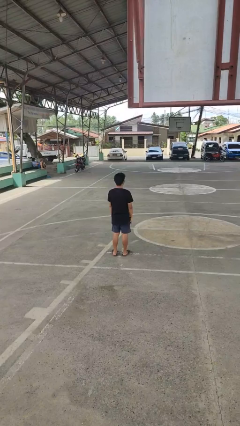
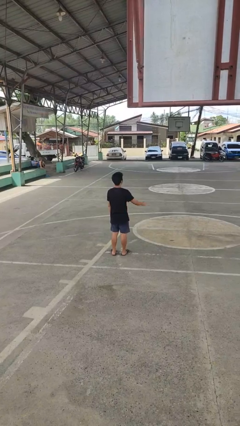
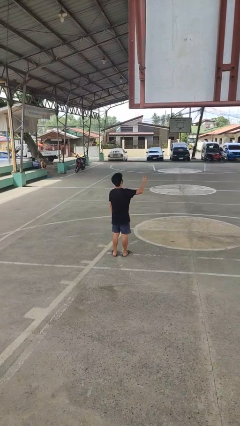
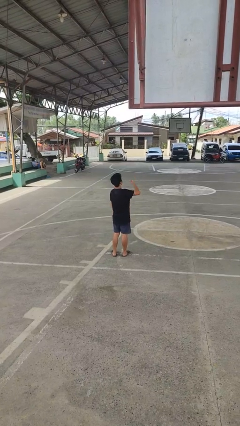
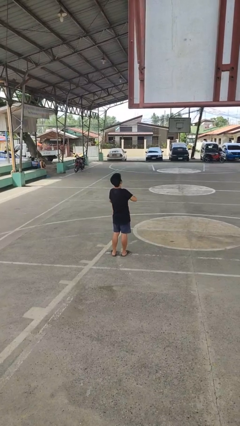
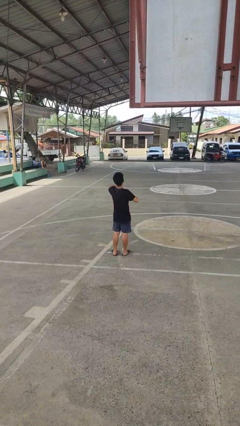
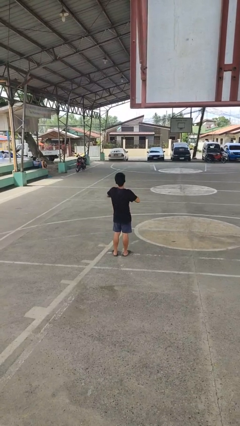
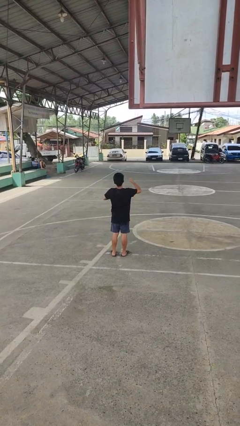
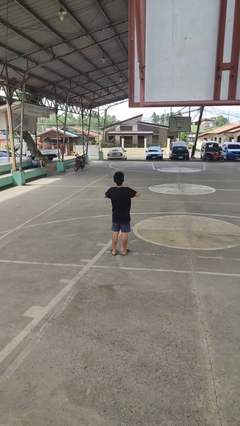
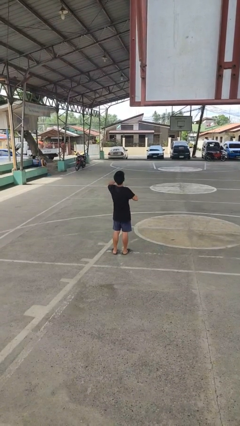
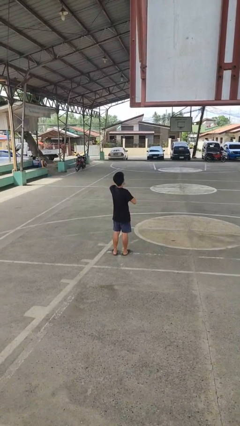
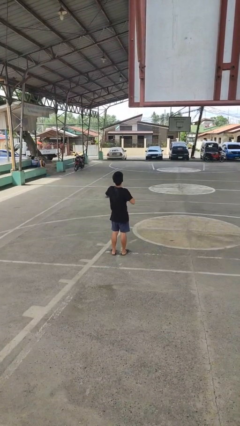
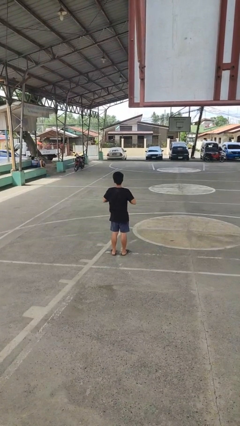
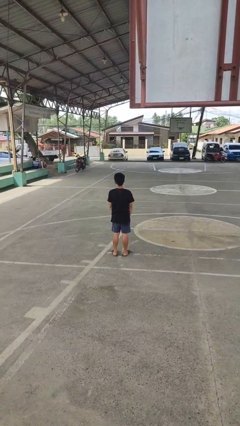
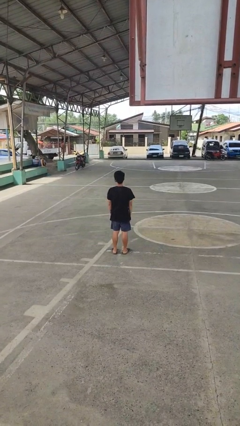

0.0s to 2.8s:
person drums on chest

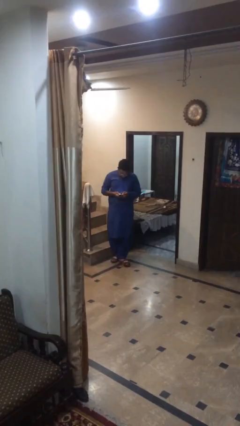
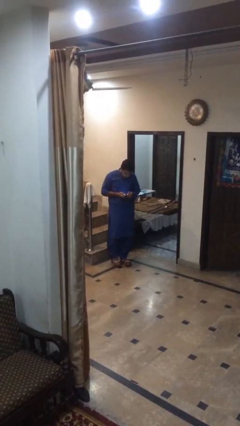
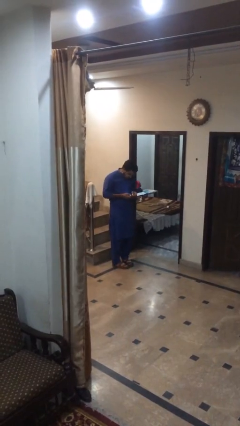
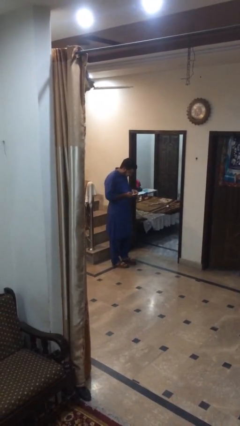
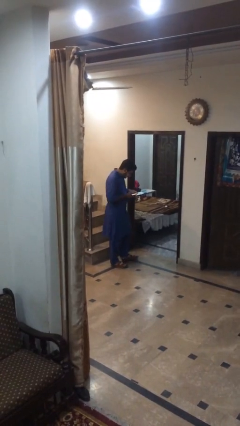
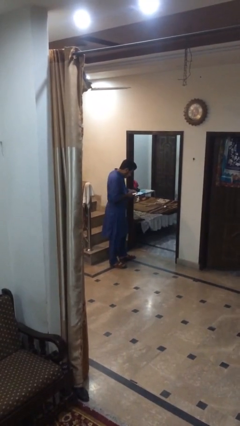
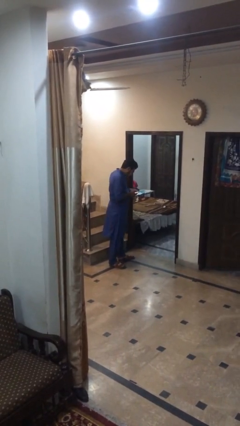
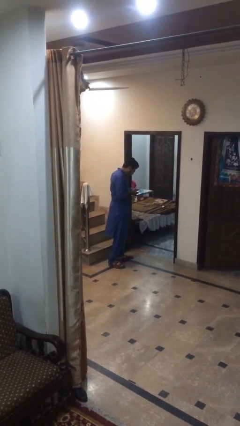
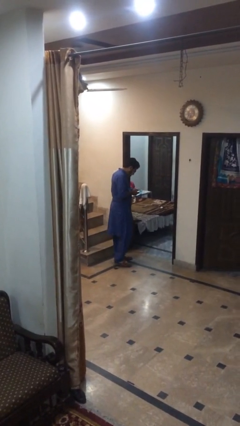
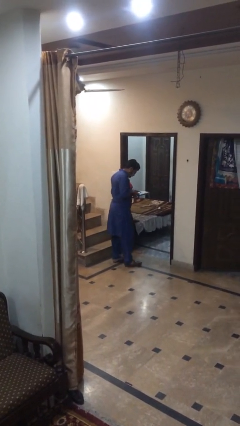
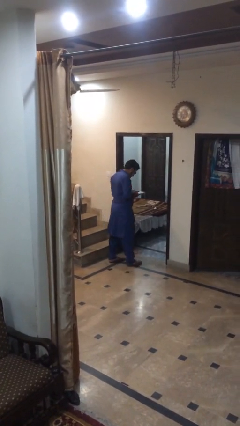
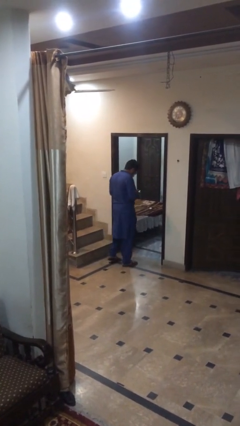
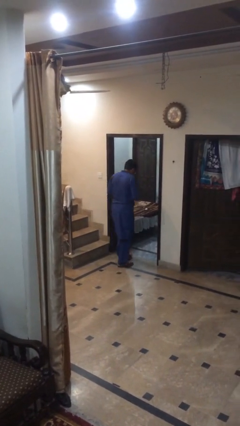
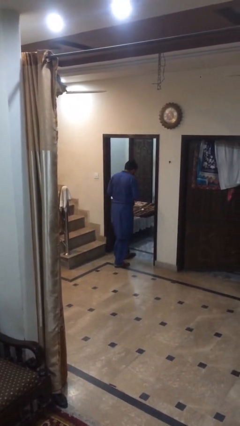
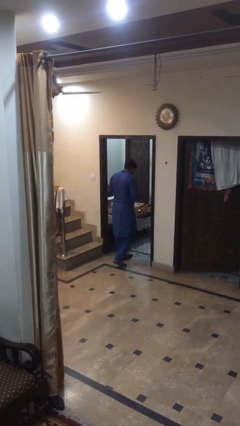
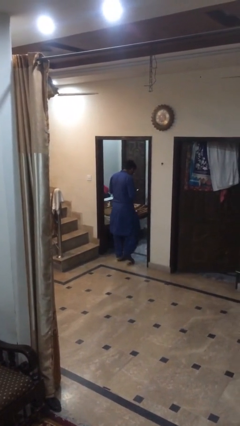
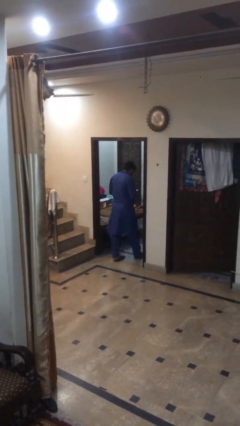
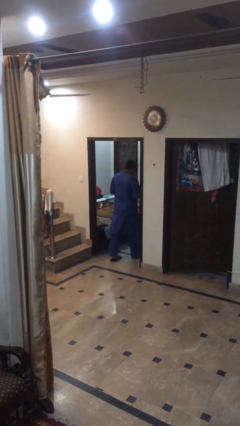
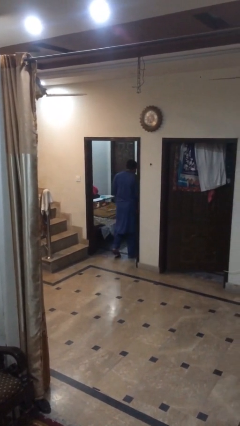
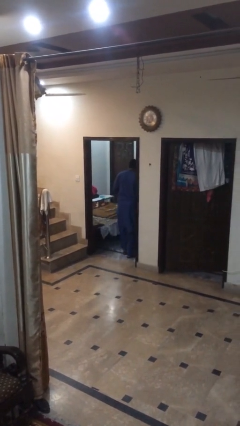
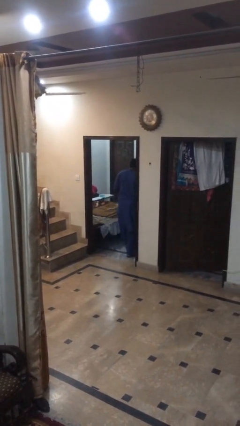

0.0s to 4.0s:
person enters scene through structure

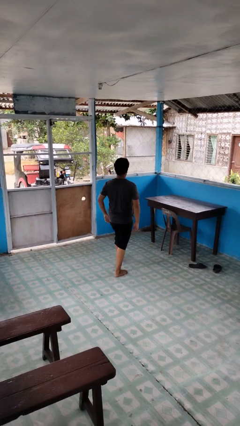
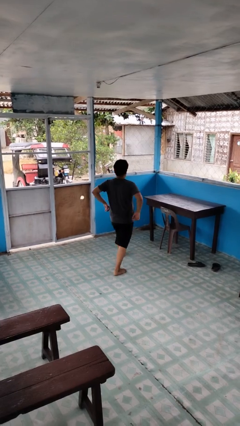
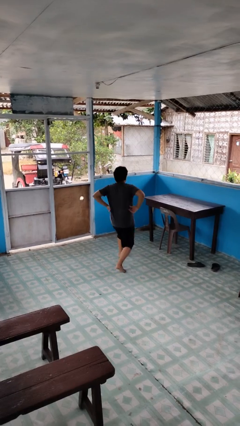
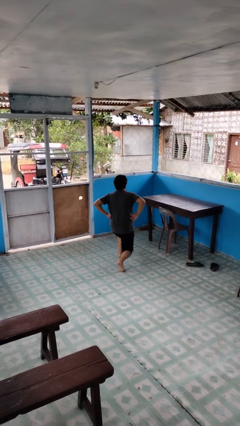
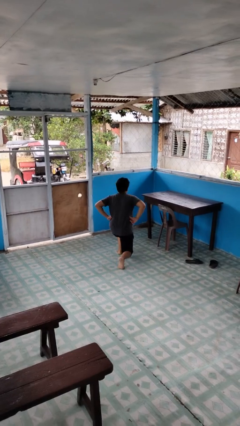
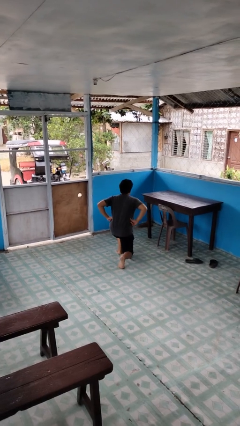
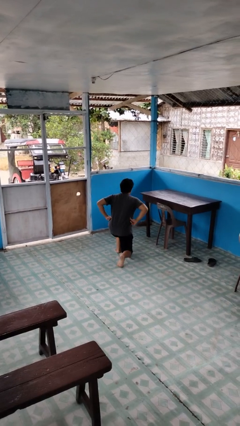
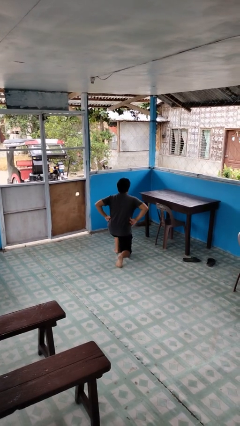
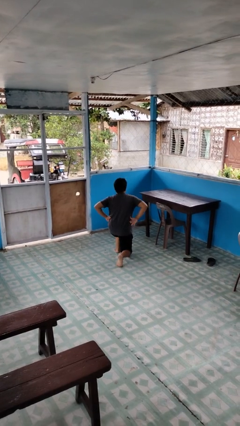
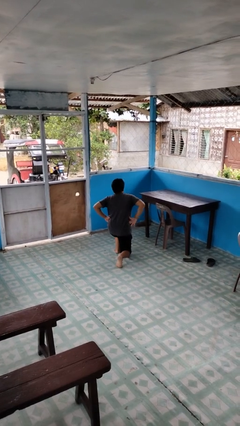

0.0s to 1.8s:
person exercises with lunges

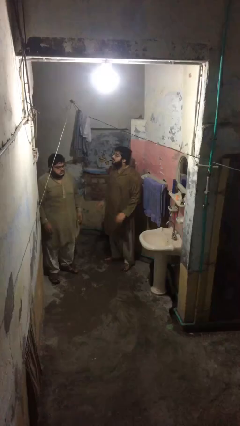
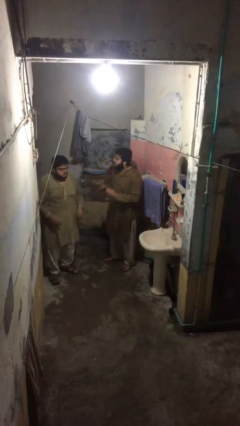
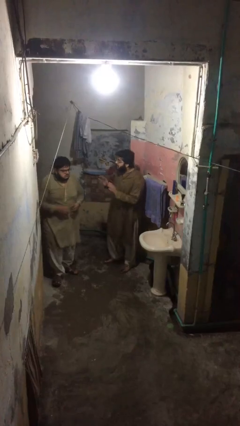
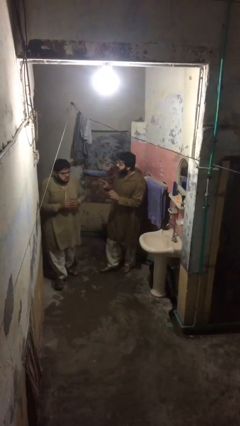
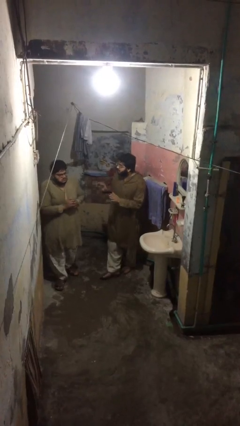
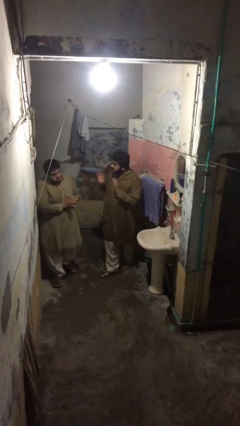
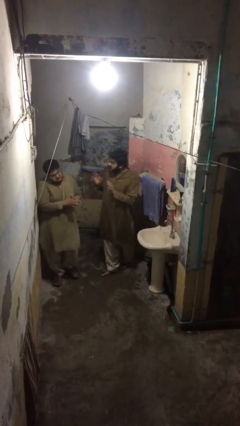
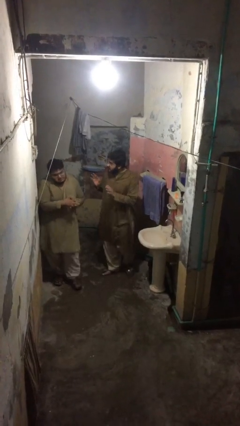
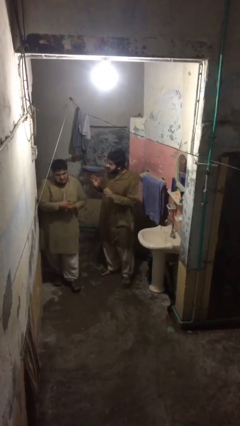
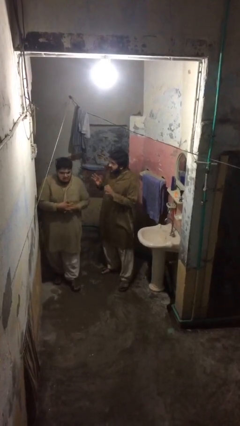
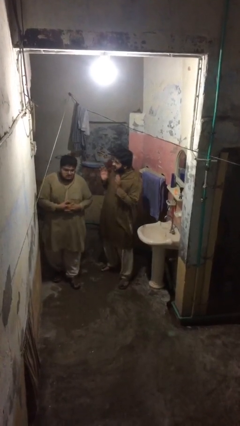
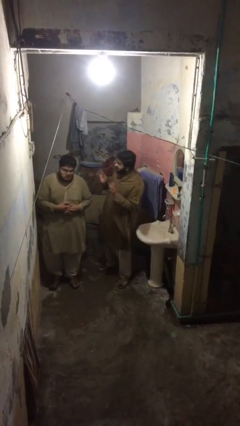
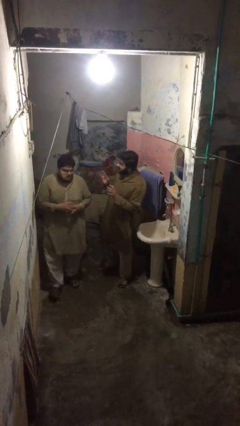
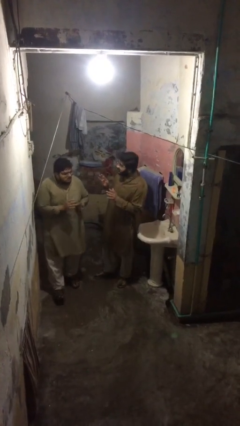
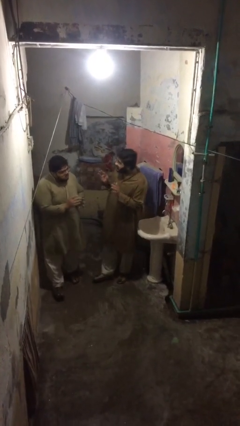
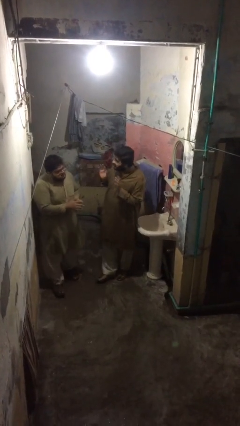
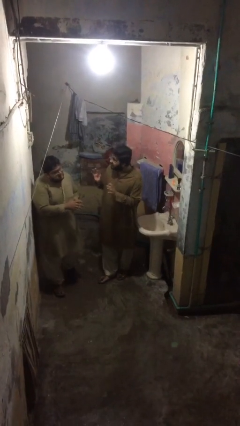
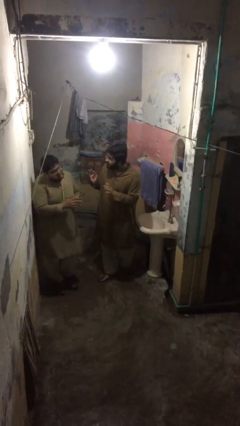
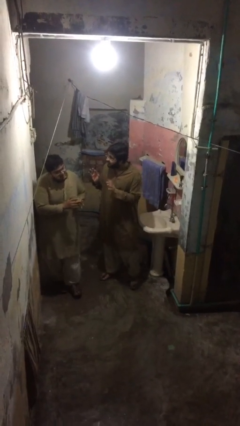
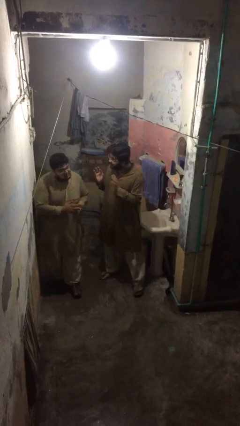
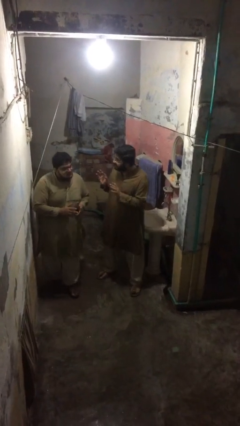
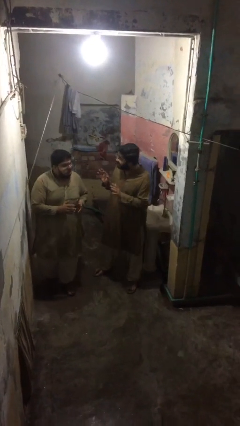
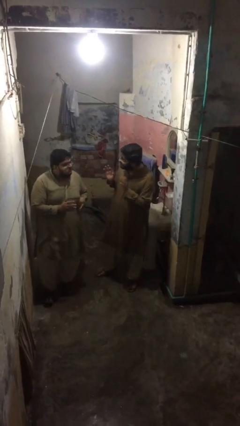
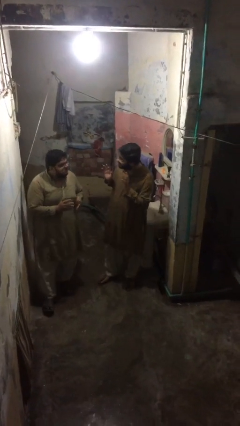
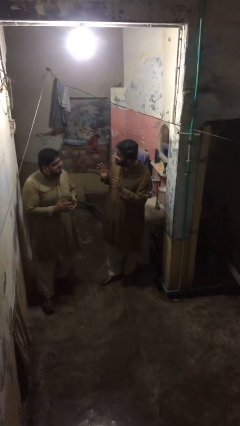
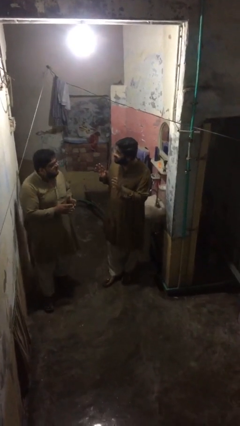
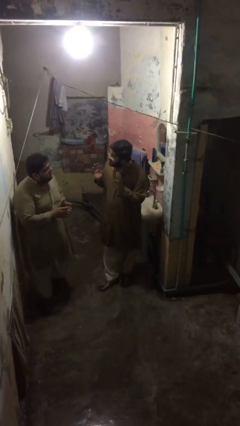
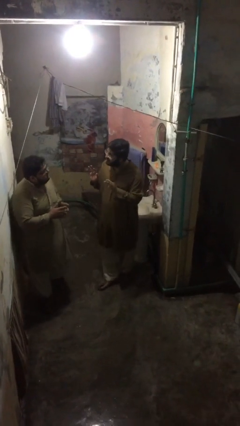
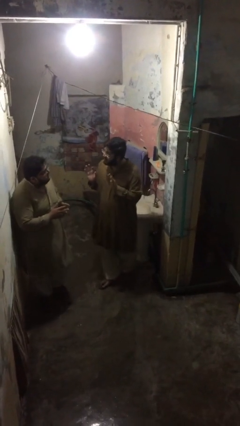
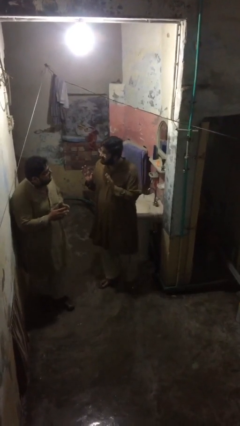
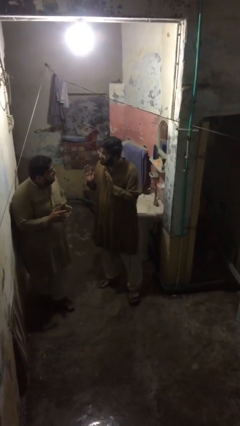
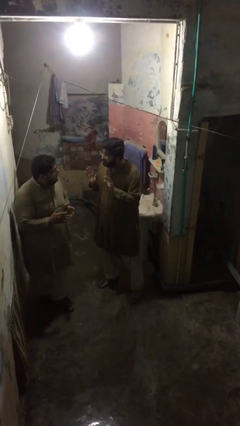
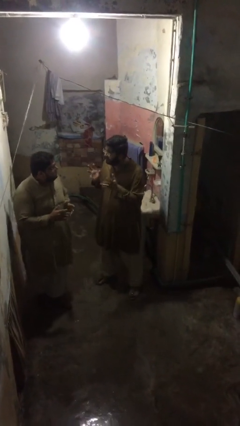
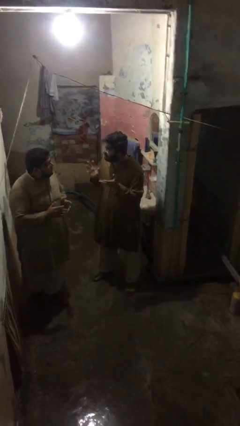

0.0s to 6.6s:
person talks to person

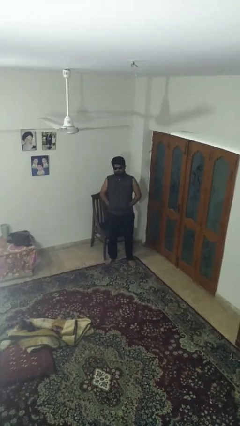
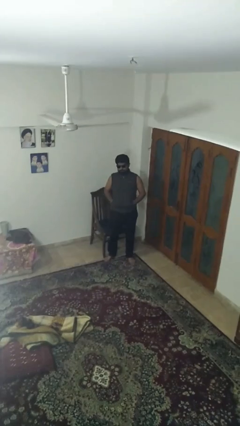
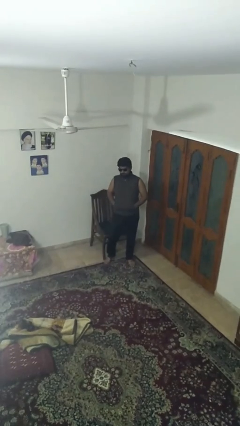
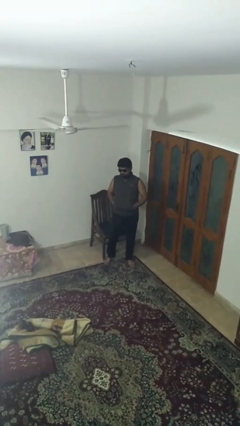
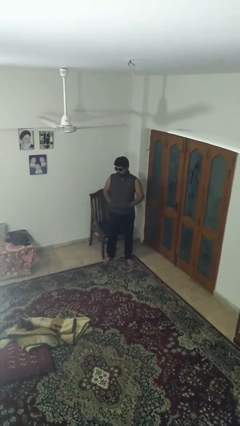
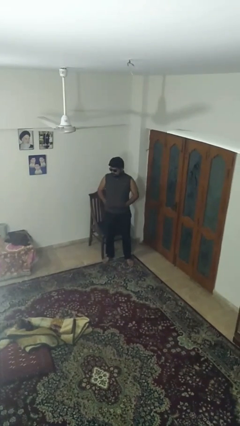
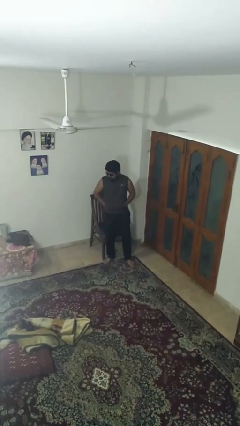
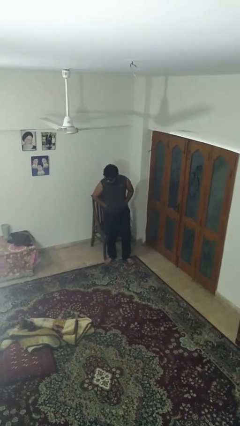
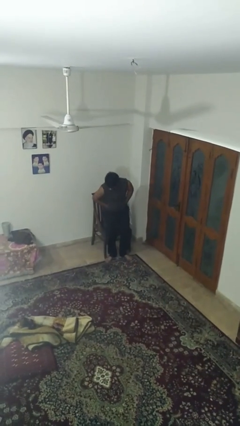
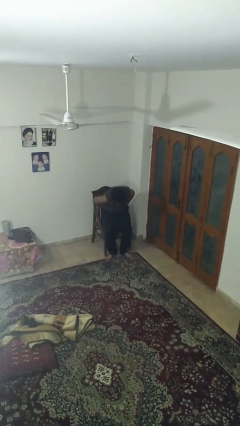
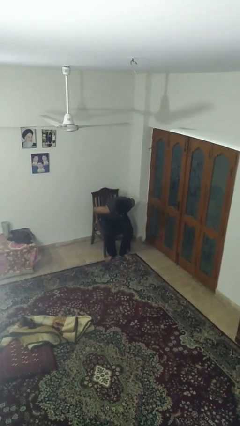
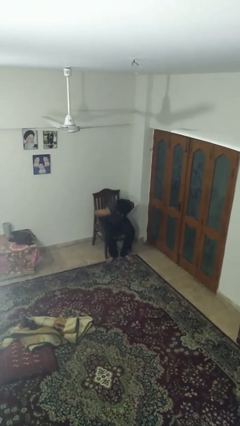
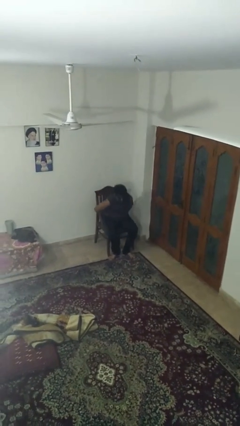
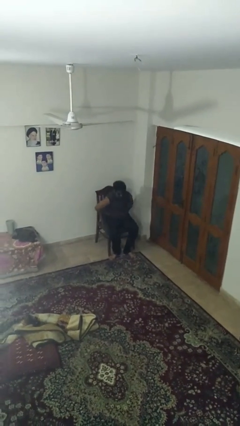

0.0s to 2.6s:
person sits down
